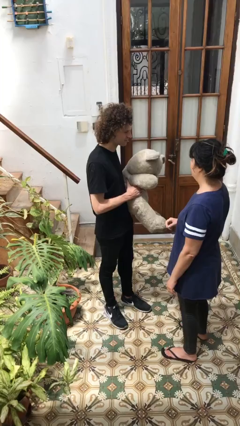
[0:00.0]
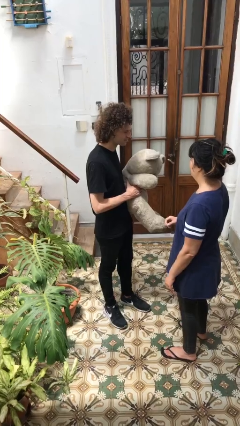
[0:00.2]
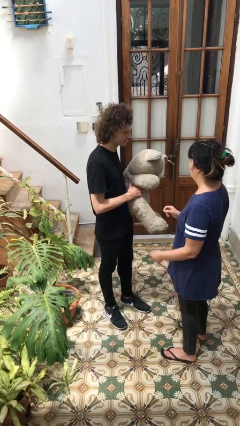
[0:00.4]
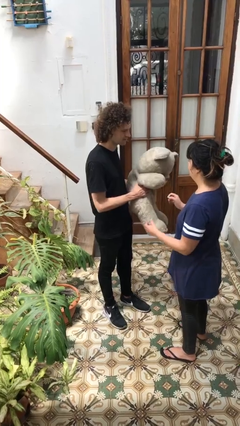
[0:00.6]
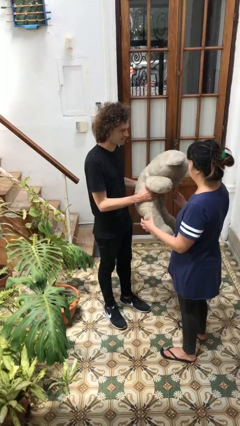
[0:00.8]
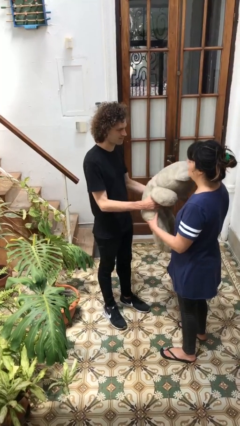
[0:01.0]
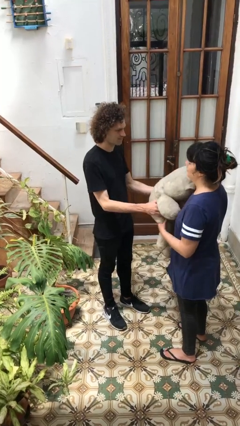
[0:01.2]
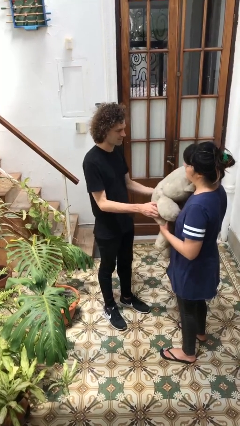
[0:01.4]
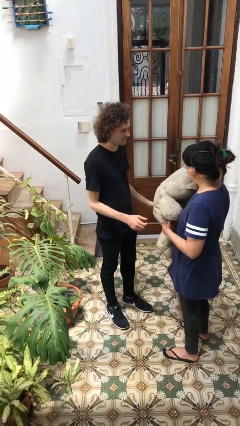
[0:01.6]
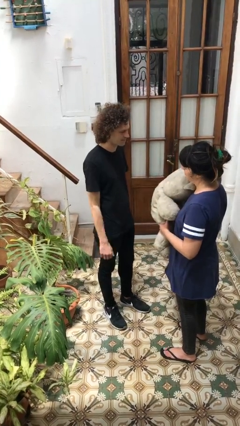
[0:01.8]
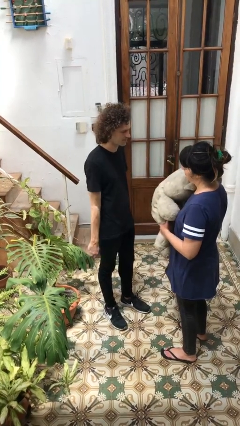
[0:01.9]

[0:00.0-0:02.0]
person transfers object to person

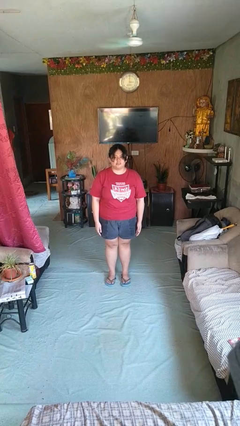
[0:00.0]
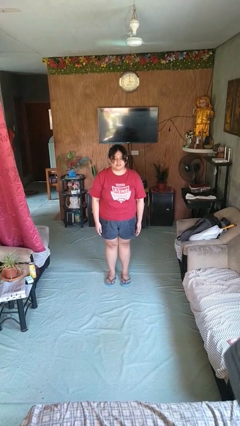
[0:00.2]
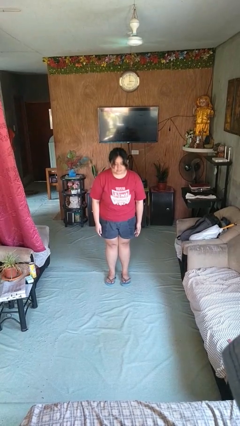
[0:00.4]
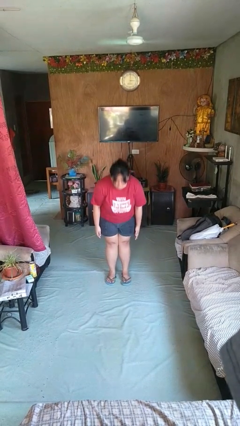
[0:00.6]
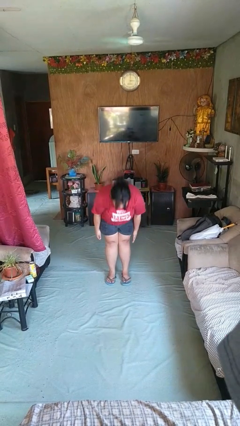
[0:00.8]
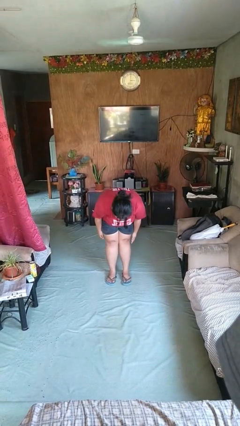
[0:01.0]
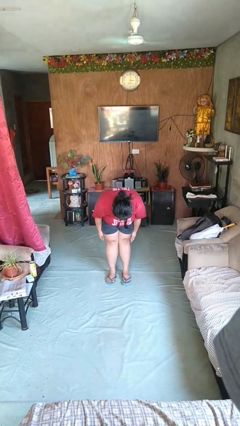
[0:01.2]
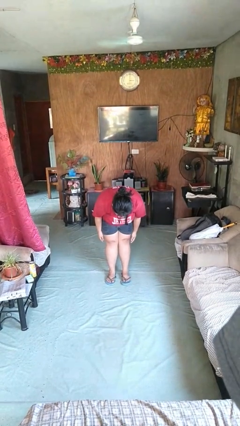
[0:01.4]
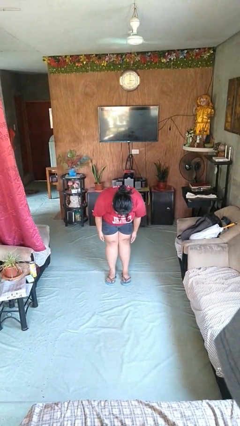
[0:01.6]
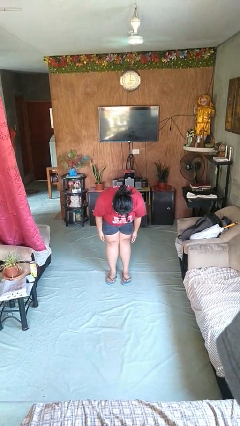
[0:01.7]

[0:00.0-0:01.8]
person bows

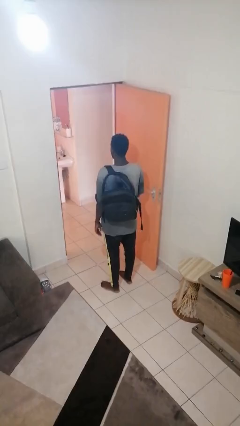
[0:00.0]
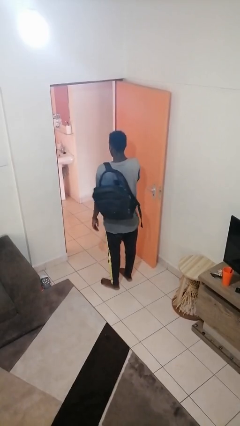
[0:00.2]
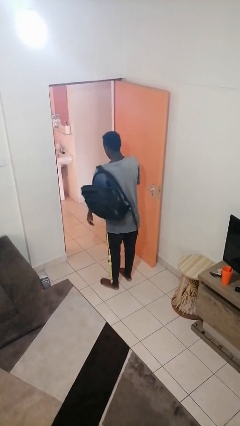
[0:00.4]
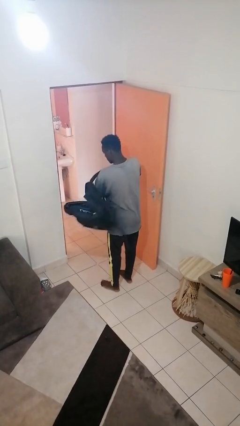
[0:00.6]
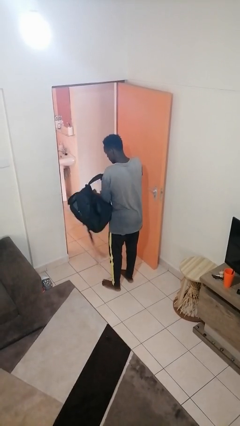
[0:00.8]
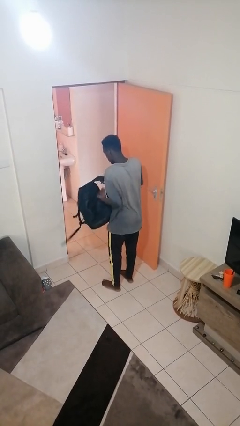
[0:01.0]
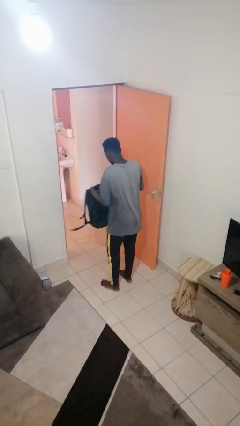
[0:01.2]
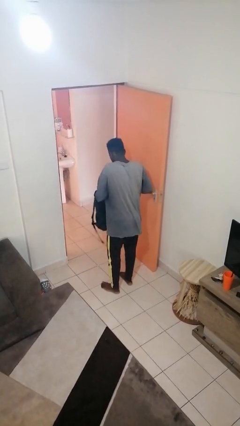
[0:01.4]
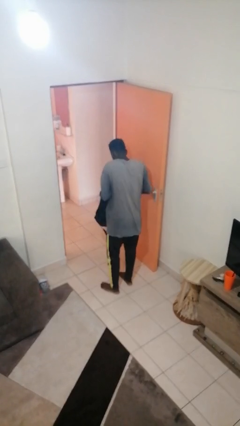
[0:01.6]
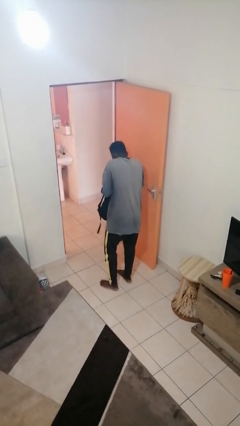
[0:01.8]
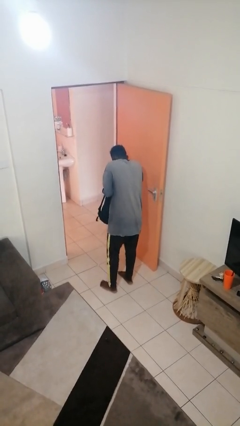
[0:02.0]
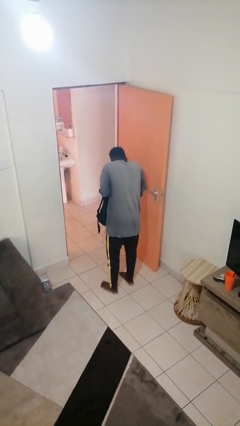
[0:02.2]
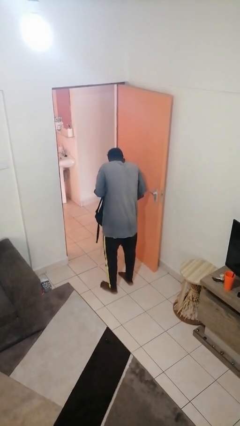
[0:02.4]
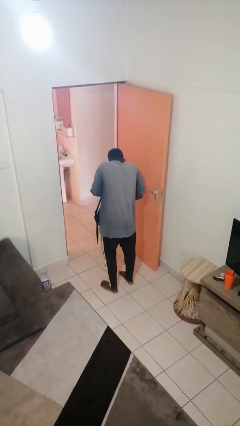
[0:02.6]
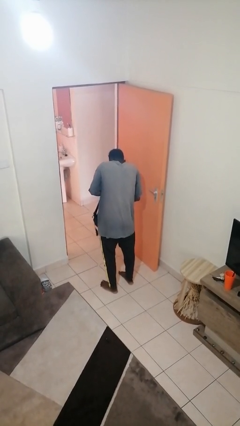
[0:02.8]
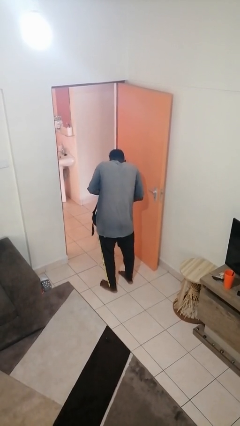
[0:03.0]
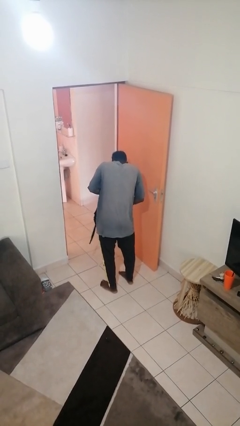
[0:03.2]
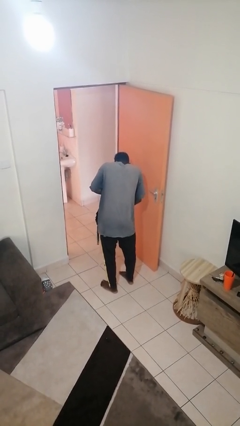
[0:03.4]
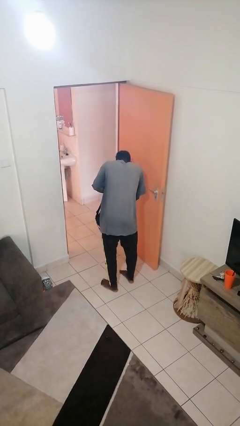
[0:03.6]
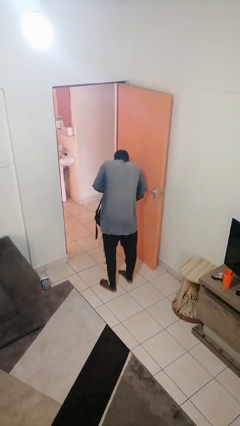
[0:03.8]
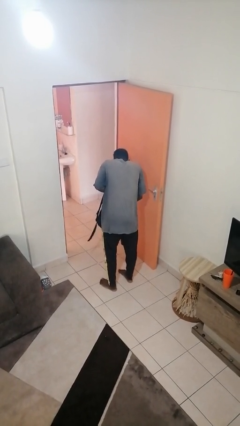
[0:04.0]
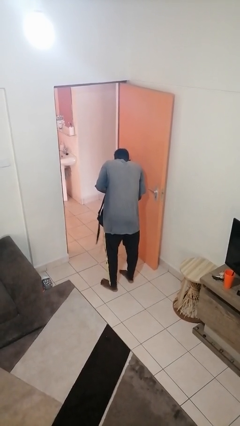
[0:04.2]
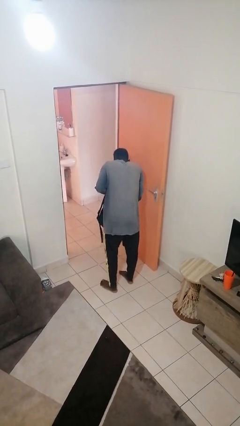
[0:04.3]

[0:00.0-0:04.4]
person searches in backpack

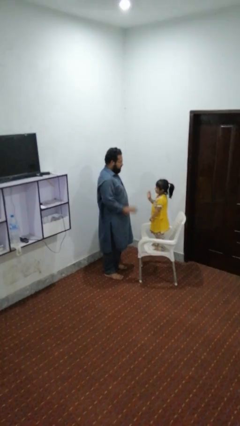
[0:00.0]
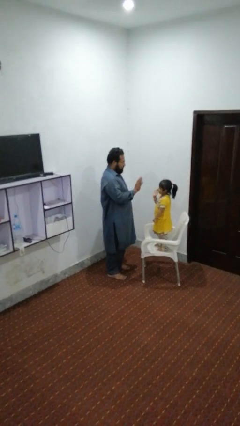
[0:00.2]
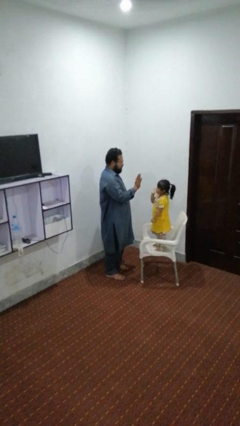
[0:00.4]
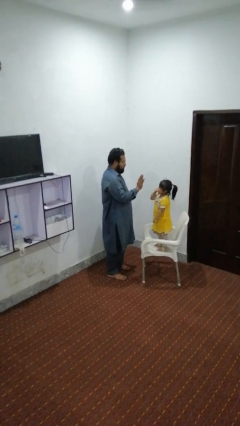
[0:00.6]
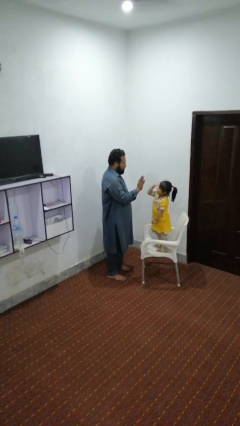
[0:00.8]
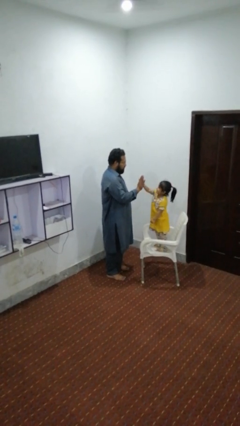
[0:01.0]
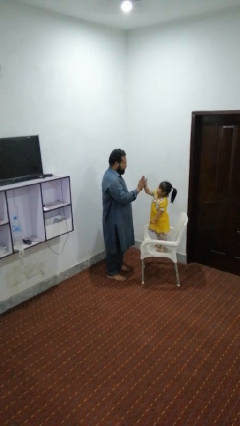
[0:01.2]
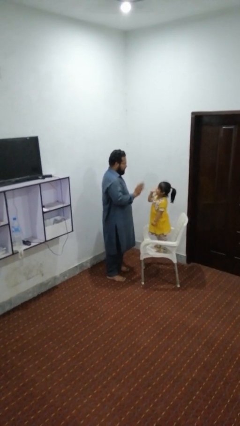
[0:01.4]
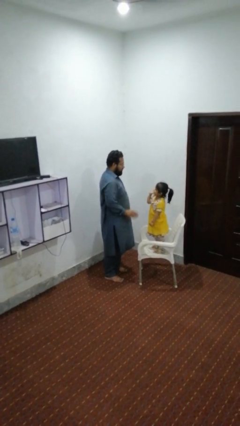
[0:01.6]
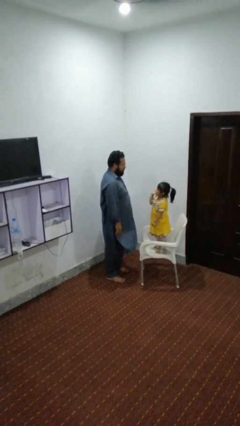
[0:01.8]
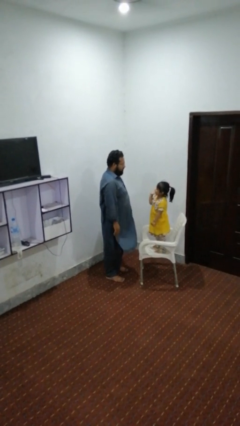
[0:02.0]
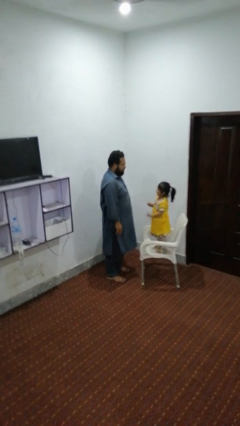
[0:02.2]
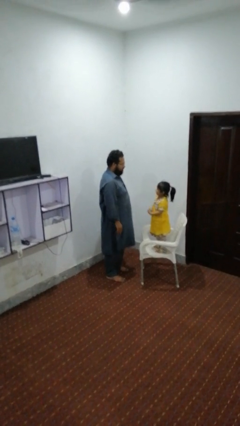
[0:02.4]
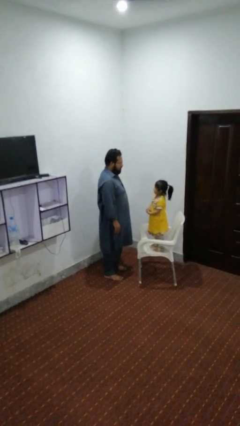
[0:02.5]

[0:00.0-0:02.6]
person highfives hand

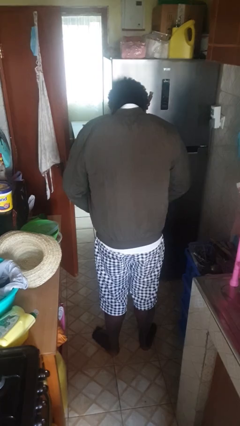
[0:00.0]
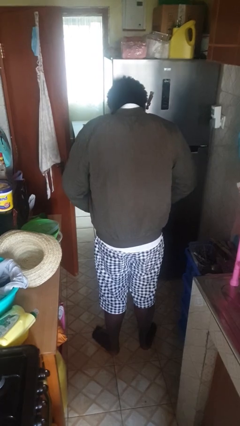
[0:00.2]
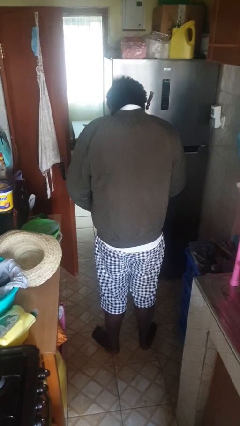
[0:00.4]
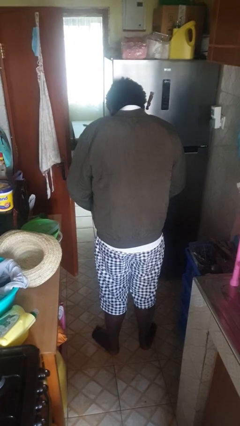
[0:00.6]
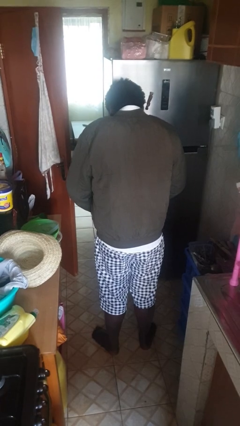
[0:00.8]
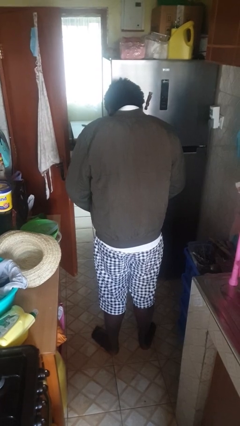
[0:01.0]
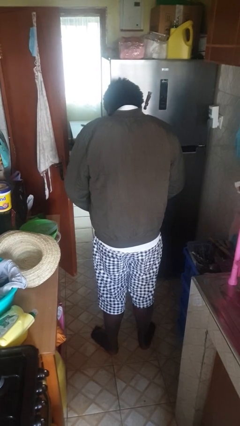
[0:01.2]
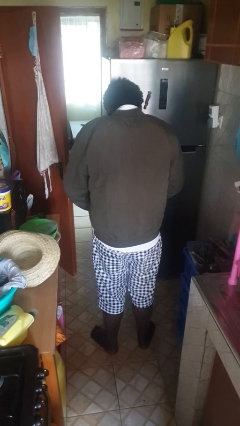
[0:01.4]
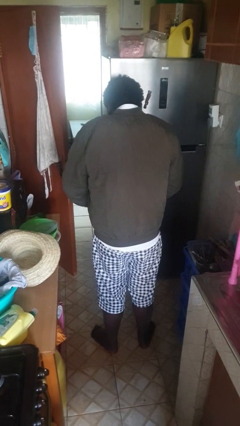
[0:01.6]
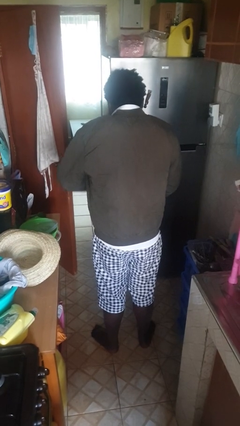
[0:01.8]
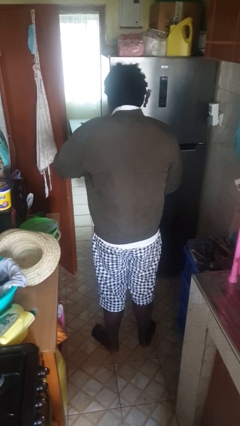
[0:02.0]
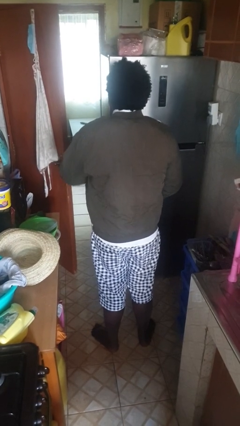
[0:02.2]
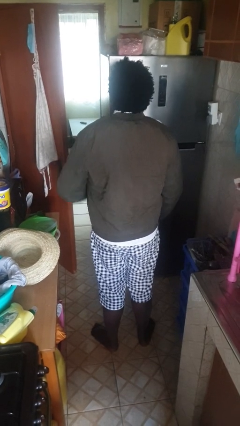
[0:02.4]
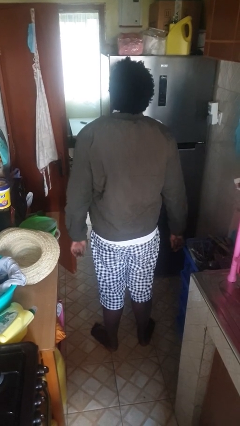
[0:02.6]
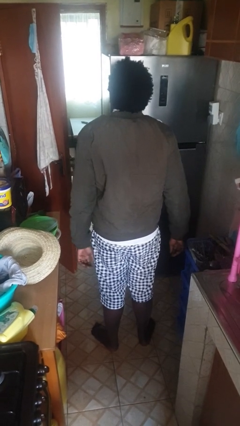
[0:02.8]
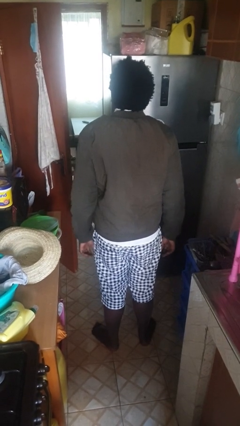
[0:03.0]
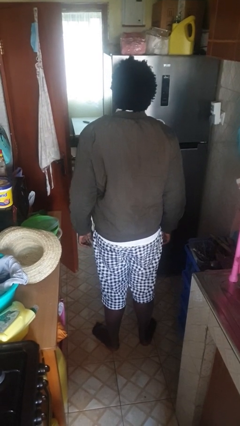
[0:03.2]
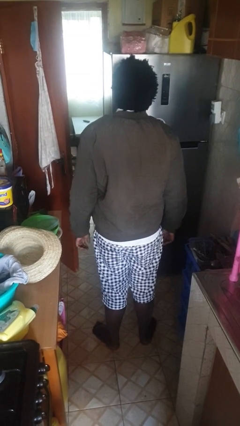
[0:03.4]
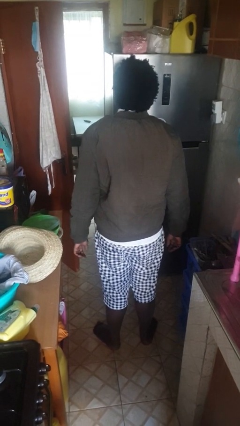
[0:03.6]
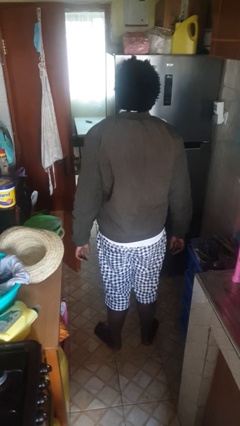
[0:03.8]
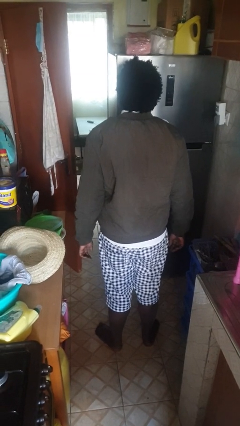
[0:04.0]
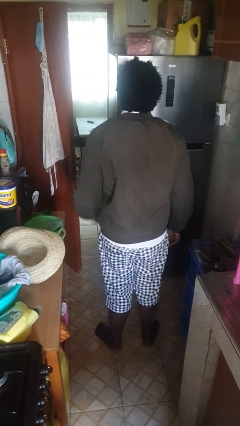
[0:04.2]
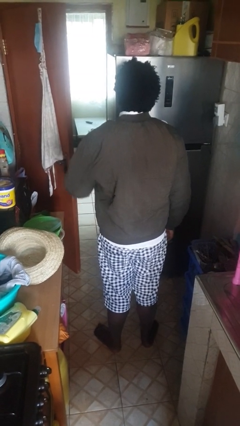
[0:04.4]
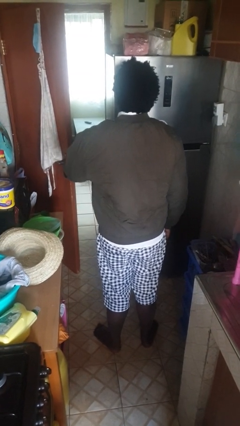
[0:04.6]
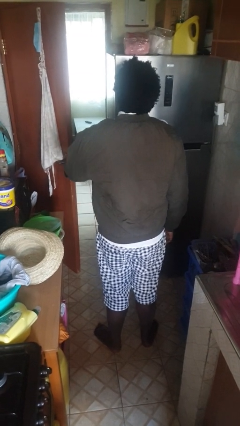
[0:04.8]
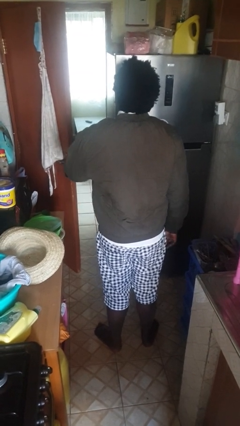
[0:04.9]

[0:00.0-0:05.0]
person zips up jacket

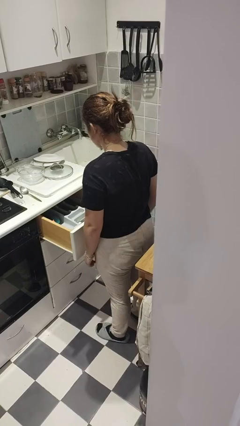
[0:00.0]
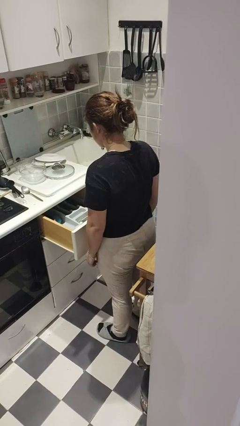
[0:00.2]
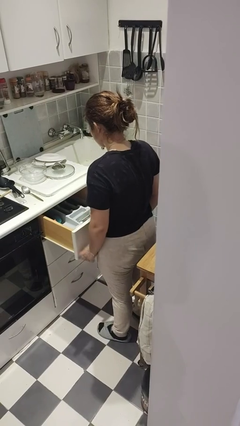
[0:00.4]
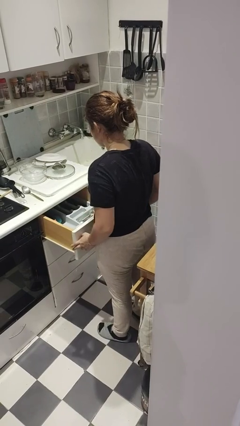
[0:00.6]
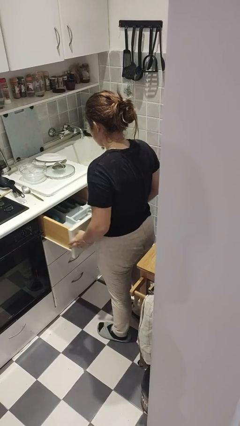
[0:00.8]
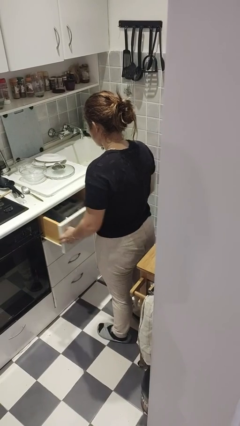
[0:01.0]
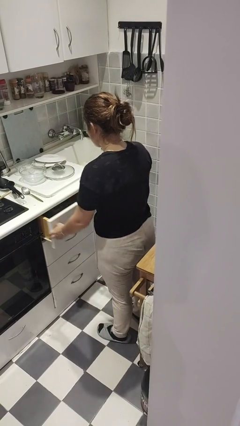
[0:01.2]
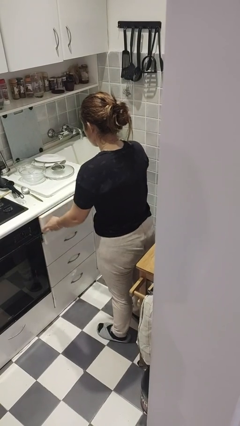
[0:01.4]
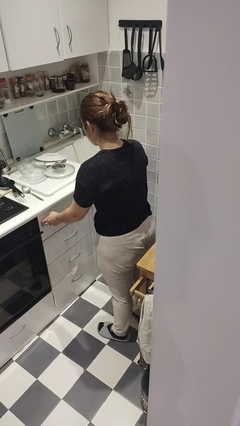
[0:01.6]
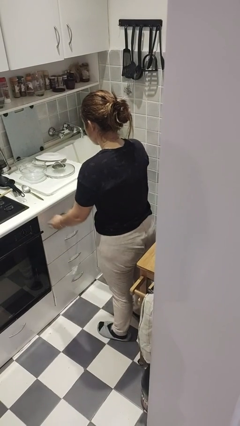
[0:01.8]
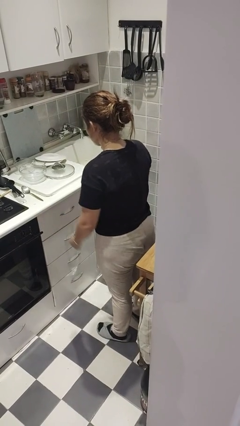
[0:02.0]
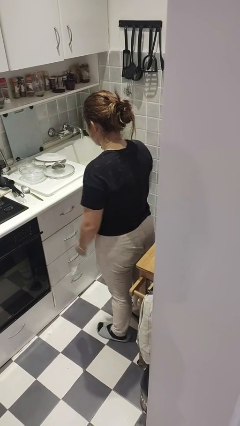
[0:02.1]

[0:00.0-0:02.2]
person closes kitchen drawer
